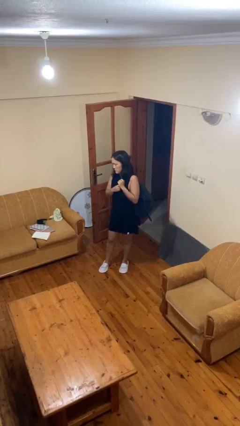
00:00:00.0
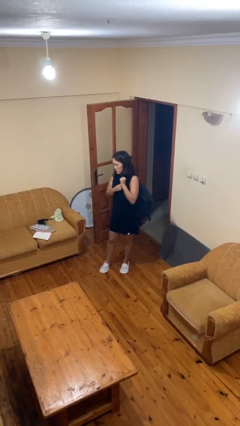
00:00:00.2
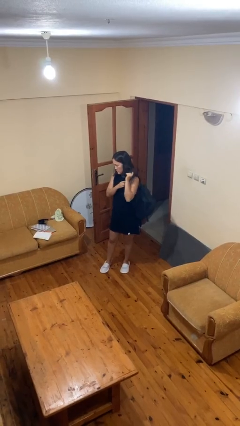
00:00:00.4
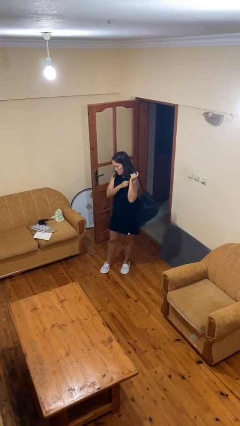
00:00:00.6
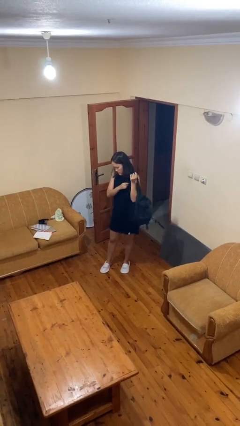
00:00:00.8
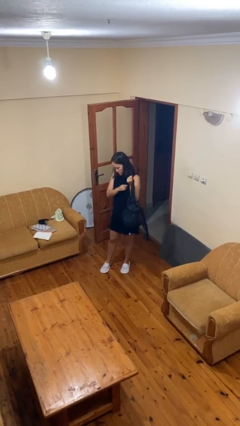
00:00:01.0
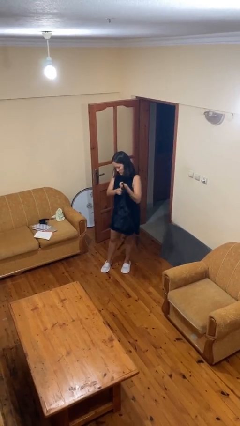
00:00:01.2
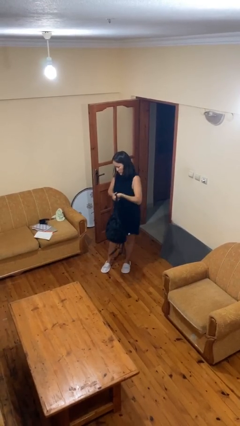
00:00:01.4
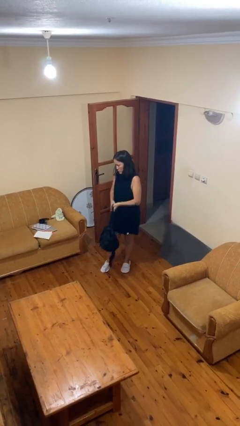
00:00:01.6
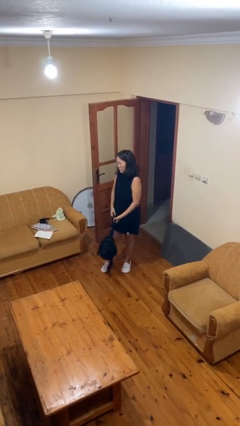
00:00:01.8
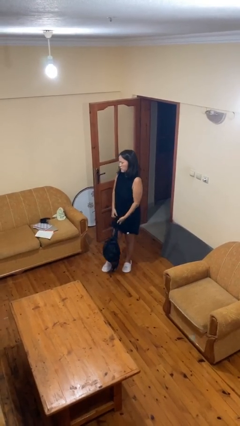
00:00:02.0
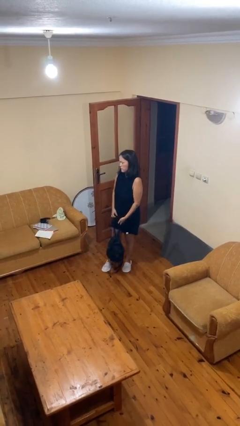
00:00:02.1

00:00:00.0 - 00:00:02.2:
person takes off backpack

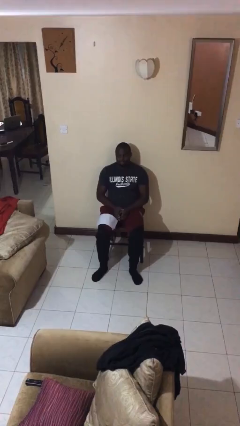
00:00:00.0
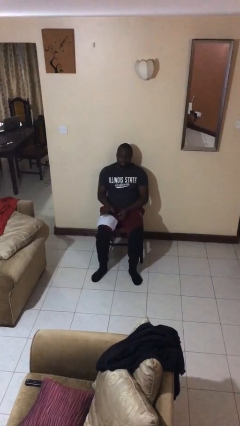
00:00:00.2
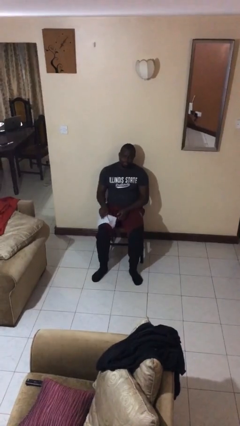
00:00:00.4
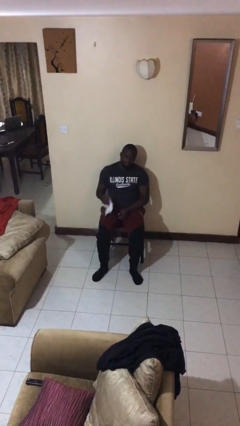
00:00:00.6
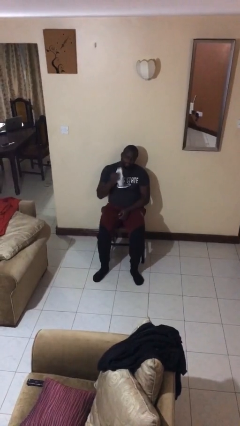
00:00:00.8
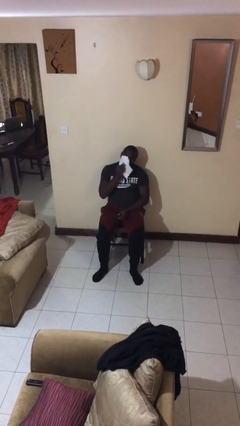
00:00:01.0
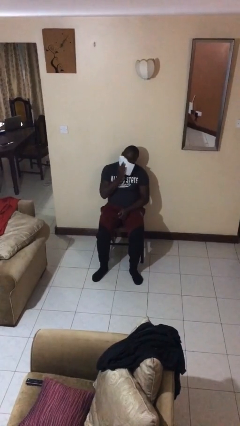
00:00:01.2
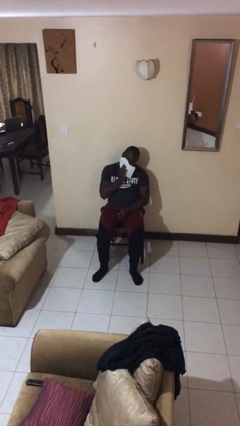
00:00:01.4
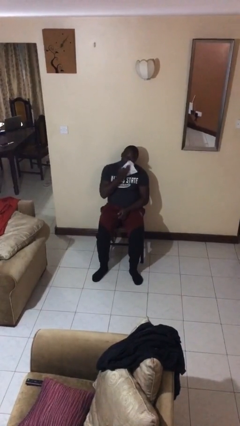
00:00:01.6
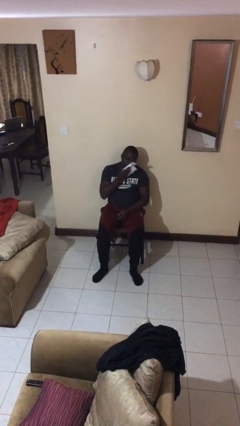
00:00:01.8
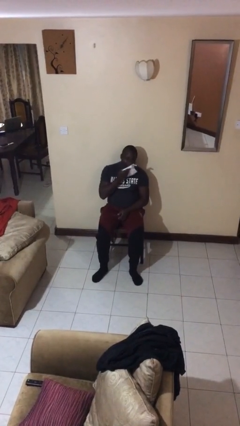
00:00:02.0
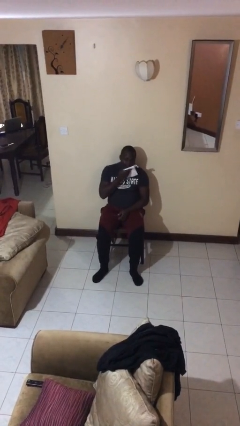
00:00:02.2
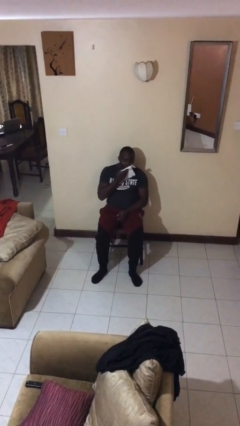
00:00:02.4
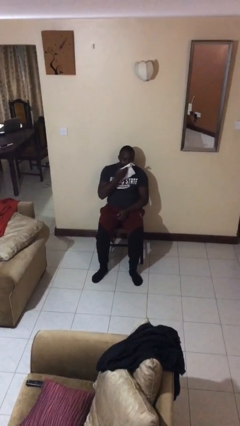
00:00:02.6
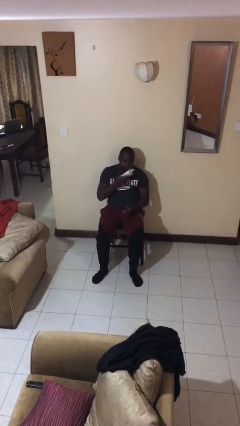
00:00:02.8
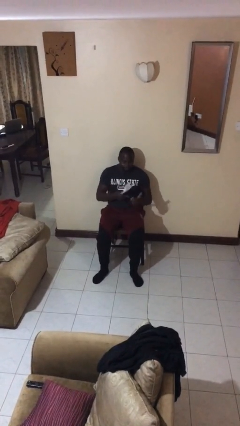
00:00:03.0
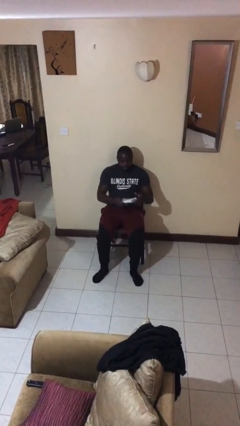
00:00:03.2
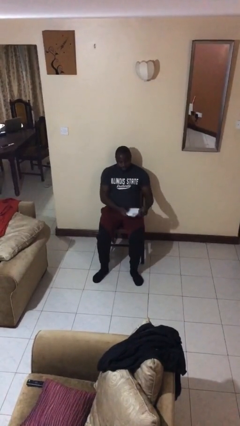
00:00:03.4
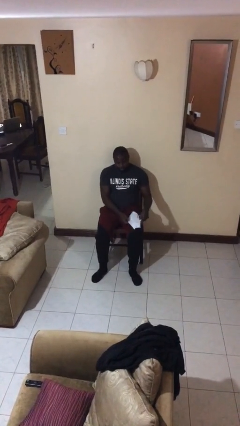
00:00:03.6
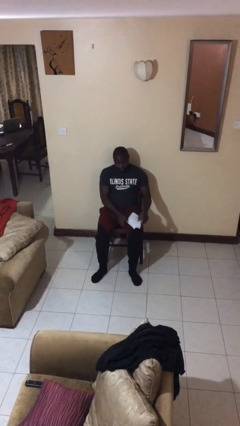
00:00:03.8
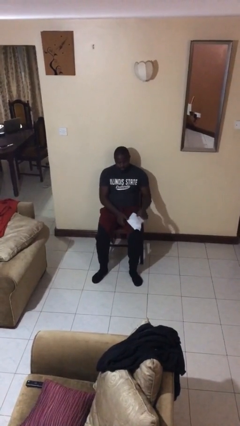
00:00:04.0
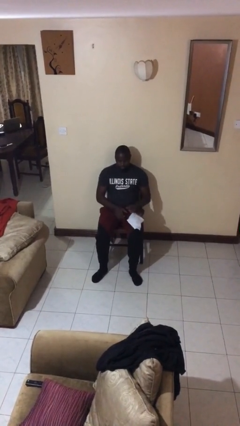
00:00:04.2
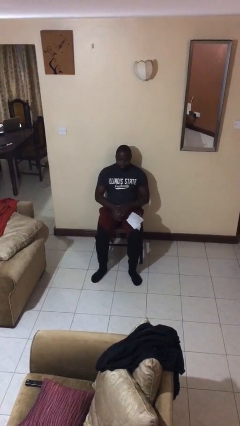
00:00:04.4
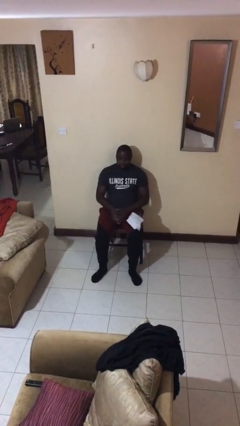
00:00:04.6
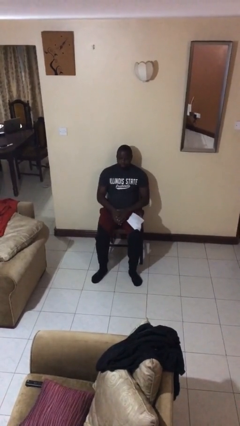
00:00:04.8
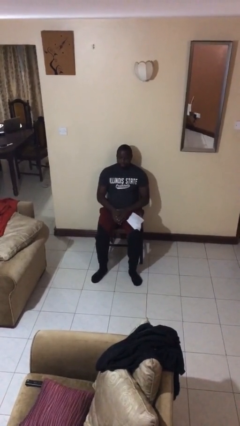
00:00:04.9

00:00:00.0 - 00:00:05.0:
person wipes mouth with napkin

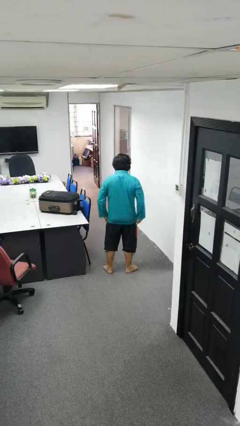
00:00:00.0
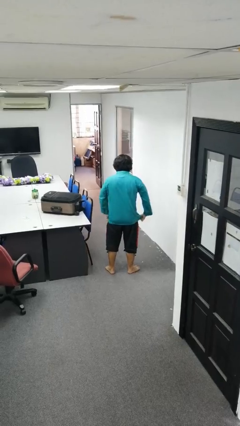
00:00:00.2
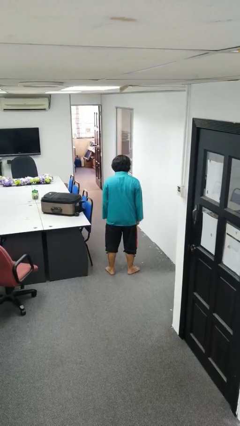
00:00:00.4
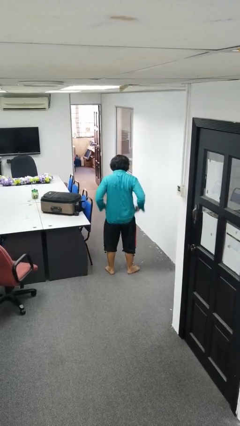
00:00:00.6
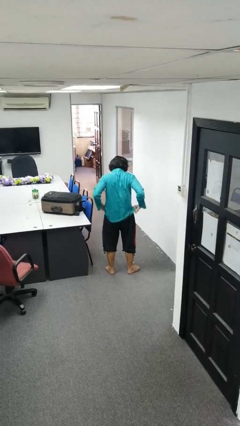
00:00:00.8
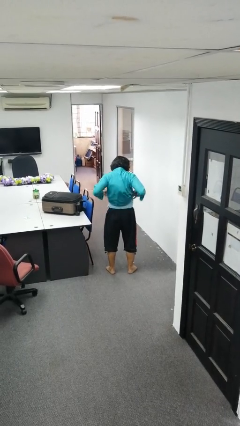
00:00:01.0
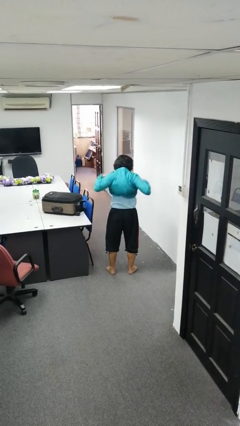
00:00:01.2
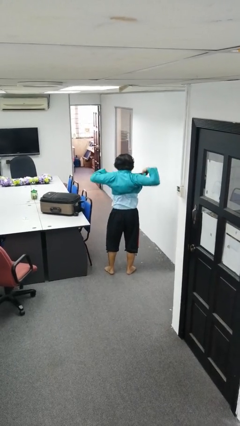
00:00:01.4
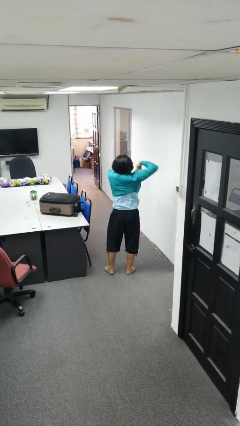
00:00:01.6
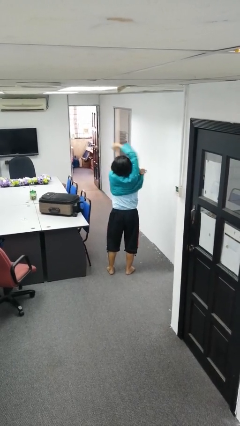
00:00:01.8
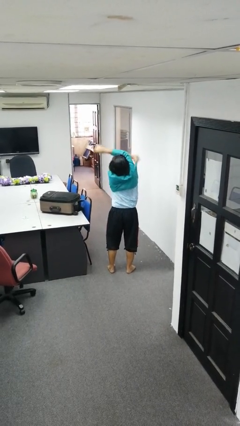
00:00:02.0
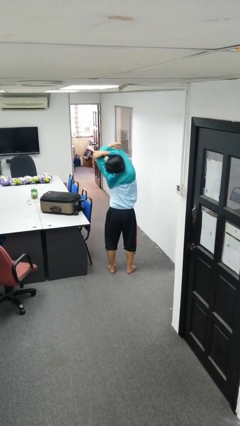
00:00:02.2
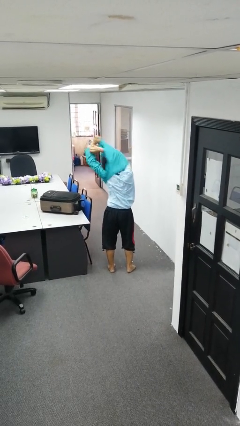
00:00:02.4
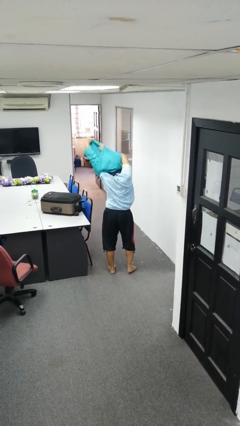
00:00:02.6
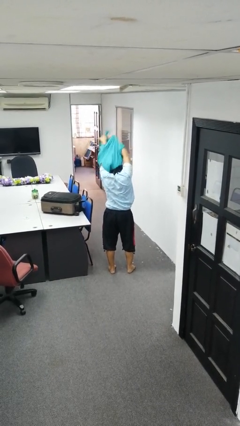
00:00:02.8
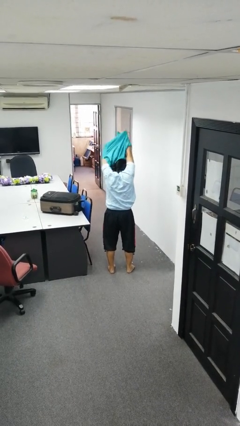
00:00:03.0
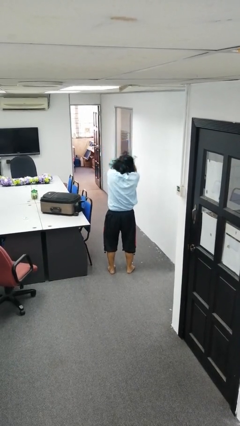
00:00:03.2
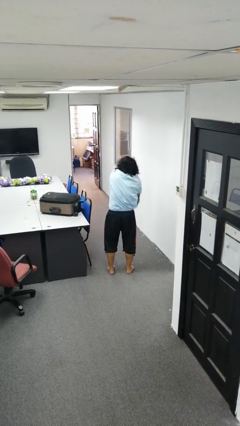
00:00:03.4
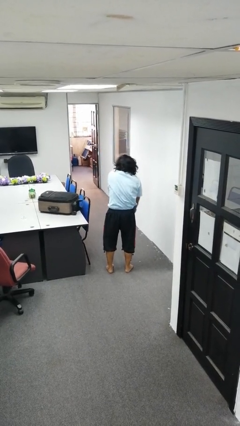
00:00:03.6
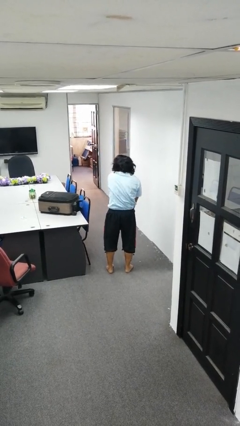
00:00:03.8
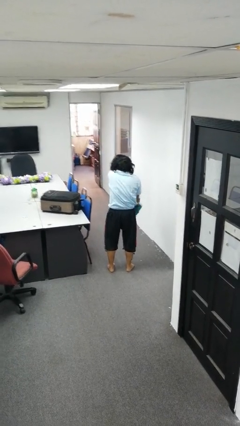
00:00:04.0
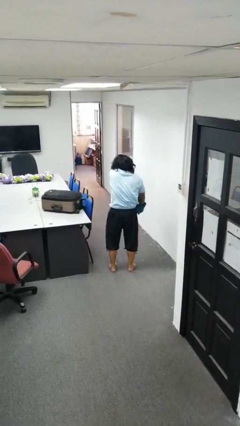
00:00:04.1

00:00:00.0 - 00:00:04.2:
person takes off shirt

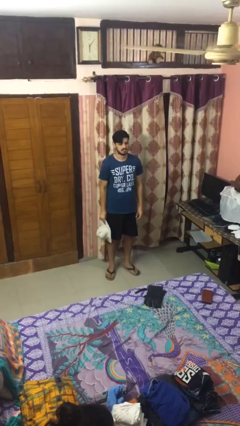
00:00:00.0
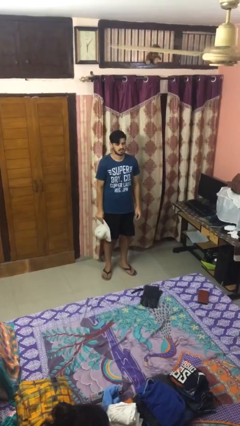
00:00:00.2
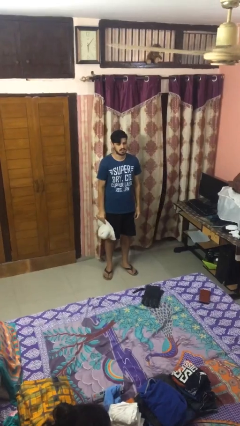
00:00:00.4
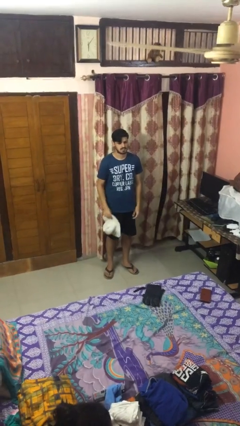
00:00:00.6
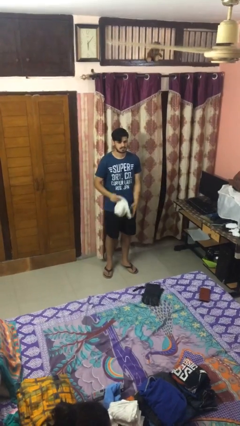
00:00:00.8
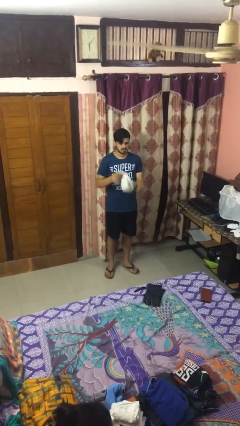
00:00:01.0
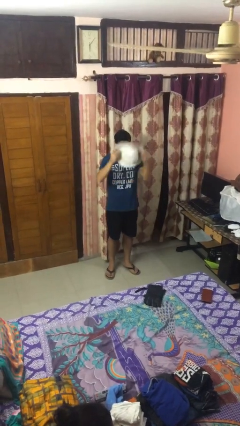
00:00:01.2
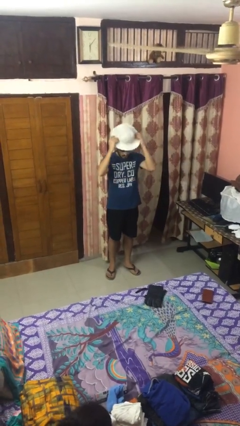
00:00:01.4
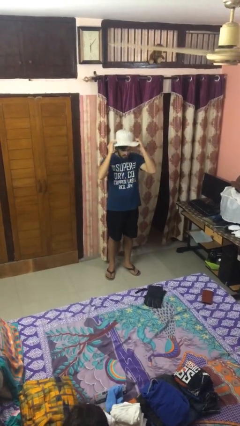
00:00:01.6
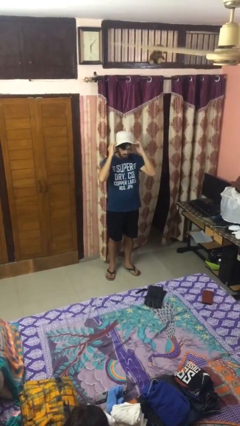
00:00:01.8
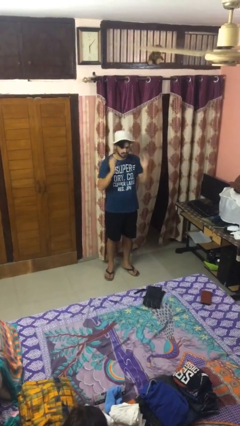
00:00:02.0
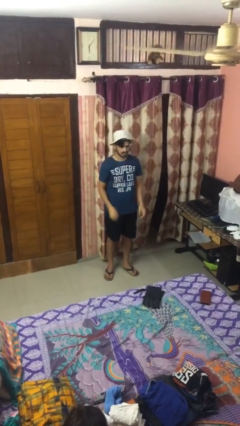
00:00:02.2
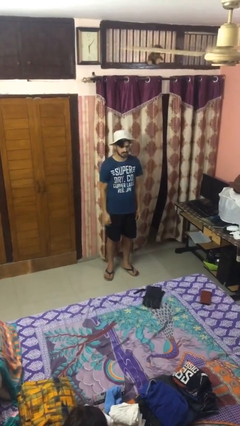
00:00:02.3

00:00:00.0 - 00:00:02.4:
person puts on hat

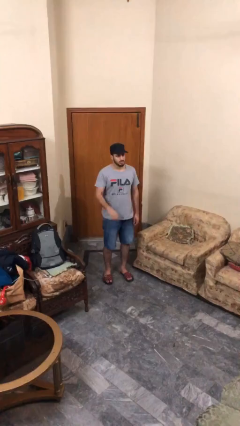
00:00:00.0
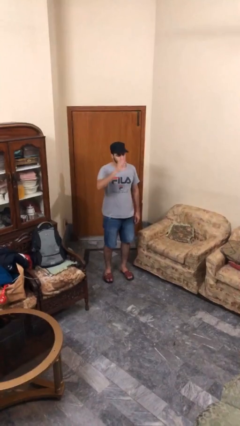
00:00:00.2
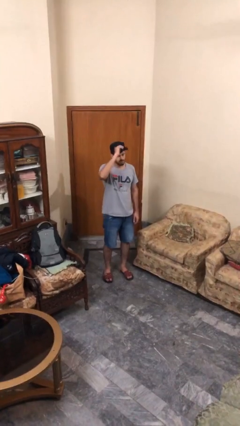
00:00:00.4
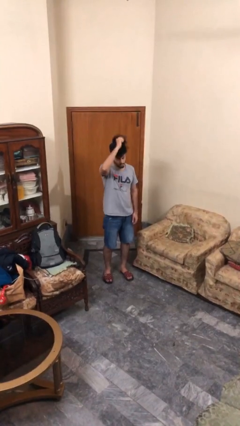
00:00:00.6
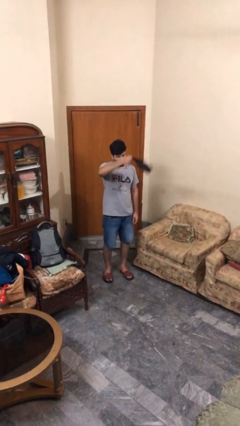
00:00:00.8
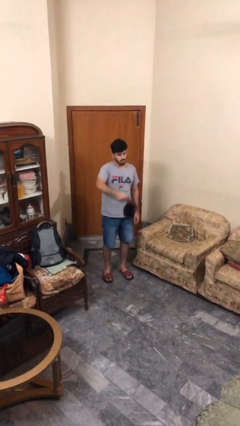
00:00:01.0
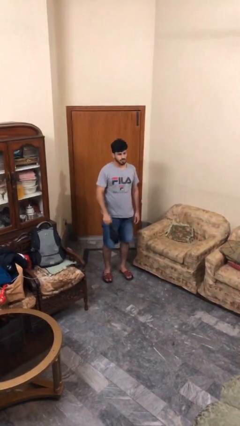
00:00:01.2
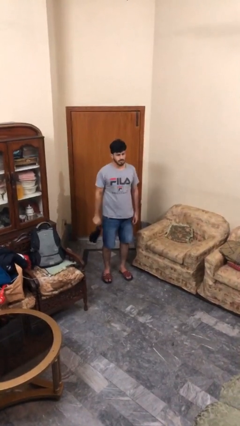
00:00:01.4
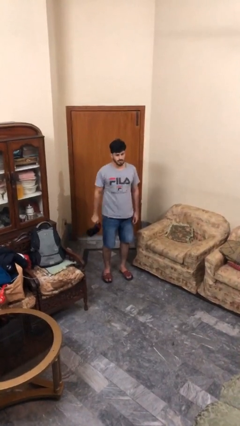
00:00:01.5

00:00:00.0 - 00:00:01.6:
person takes off hat

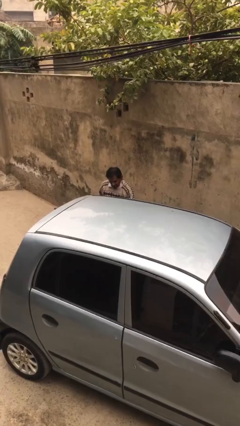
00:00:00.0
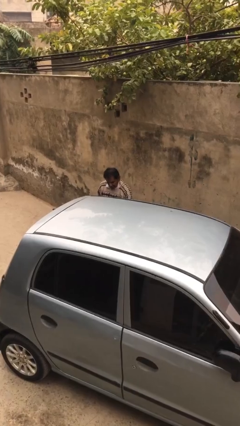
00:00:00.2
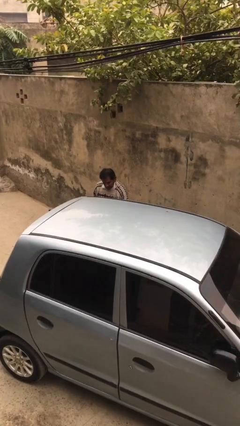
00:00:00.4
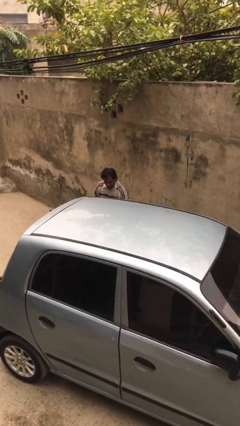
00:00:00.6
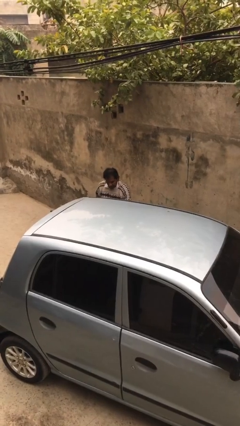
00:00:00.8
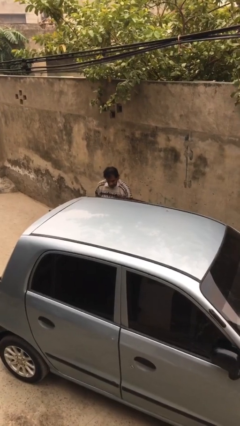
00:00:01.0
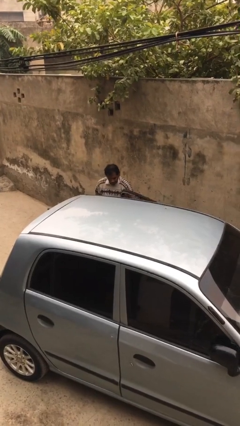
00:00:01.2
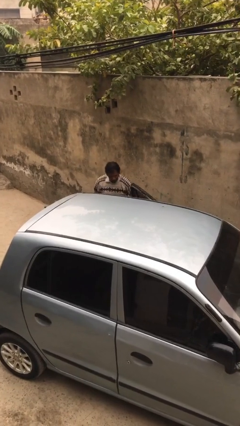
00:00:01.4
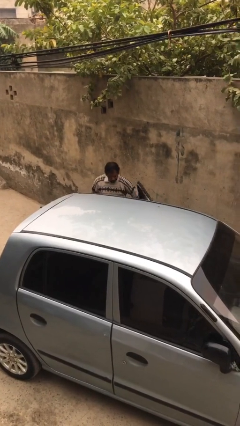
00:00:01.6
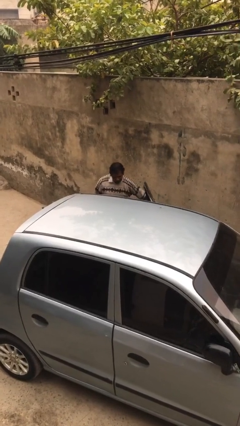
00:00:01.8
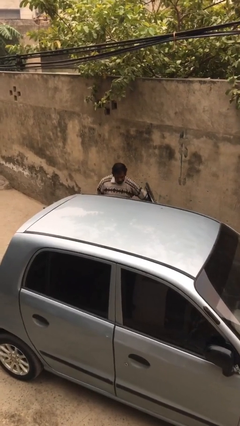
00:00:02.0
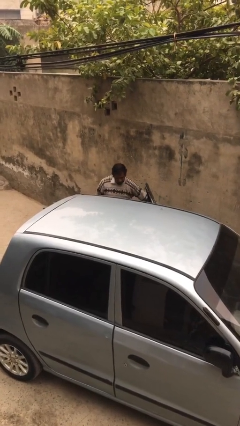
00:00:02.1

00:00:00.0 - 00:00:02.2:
person opens car door
